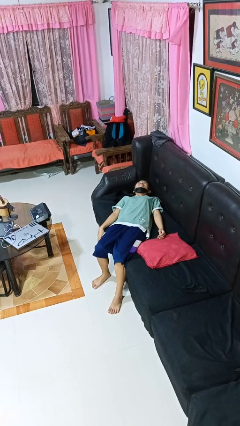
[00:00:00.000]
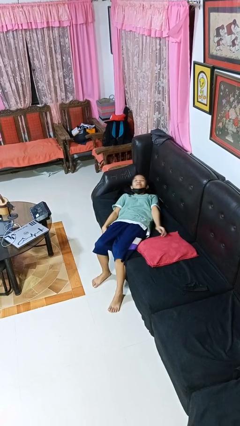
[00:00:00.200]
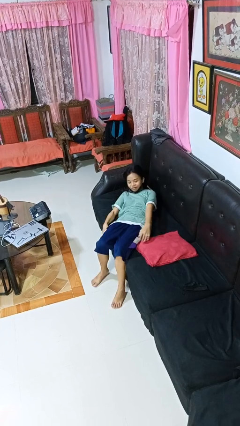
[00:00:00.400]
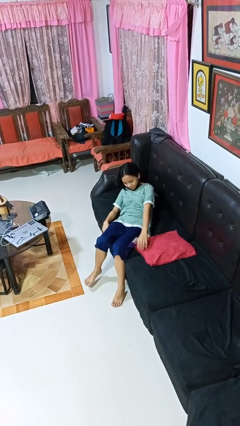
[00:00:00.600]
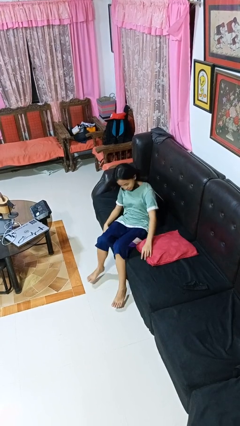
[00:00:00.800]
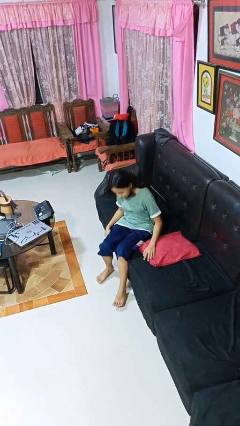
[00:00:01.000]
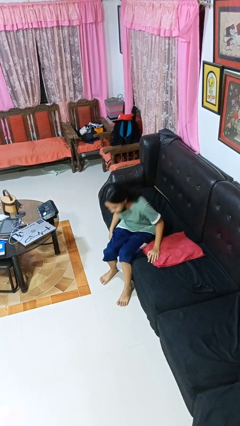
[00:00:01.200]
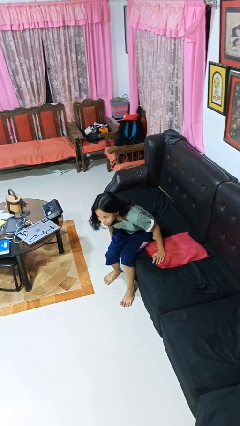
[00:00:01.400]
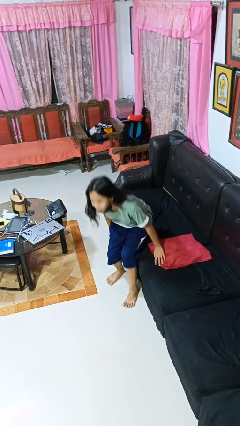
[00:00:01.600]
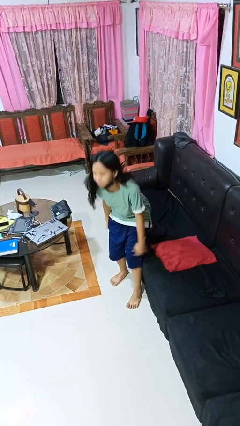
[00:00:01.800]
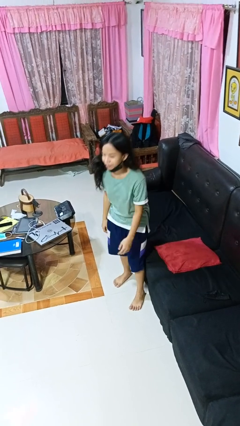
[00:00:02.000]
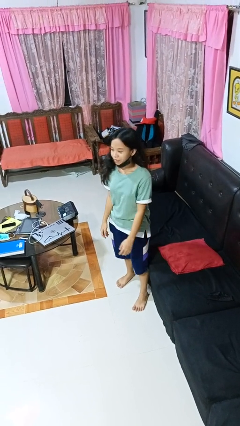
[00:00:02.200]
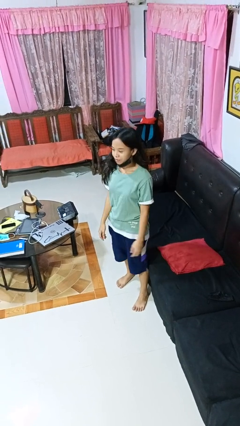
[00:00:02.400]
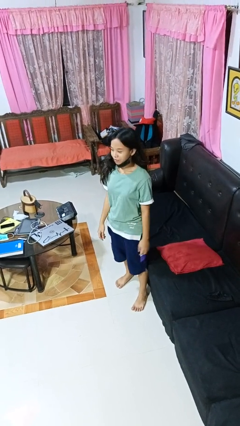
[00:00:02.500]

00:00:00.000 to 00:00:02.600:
person stands up

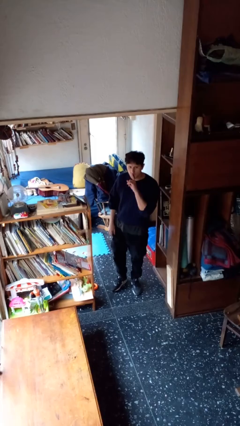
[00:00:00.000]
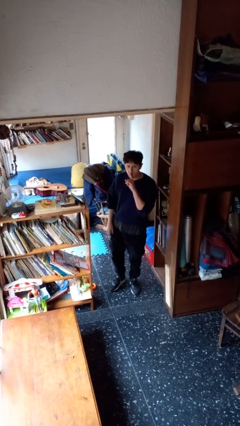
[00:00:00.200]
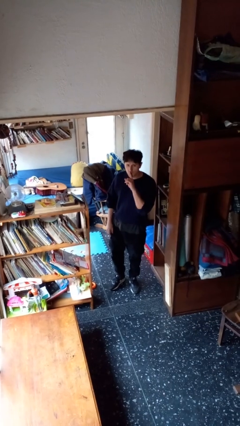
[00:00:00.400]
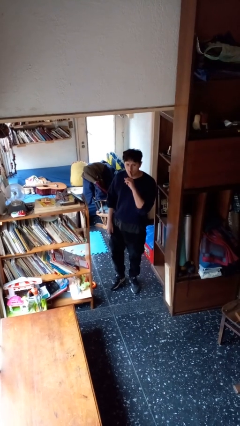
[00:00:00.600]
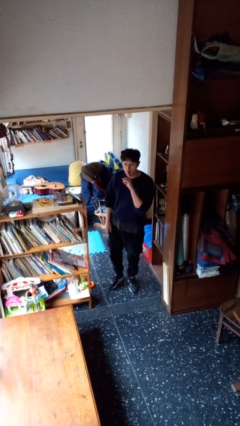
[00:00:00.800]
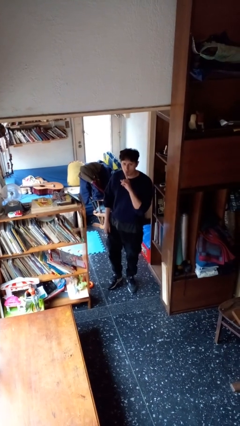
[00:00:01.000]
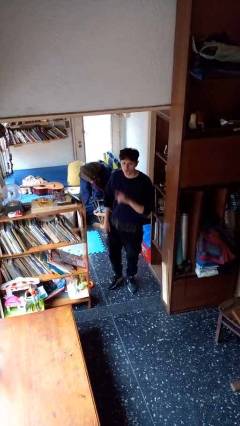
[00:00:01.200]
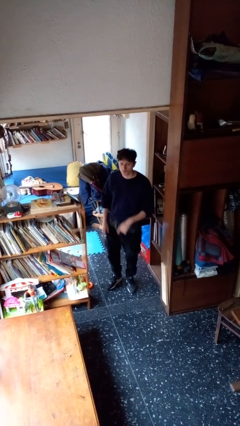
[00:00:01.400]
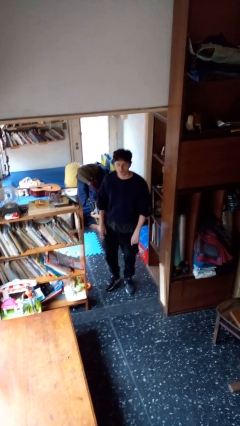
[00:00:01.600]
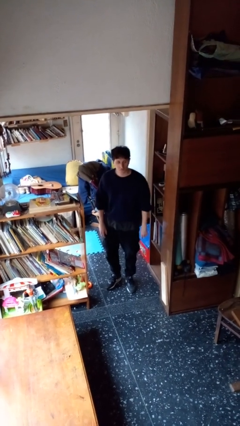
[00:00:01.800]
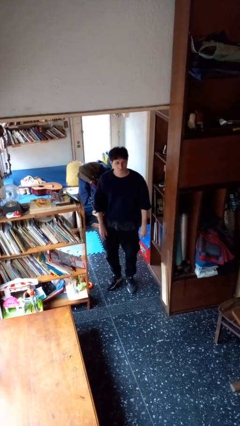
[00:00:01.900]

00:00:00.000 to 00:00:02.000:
person gestures be quiet

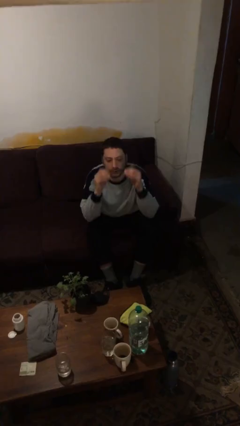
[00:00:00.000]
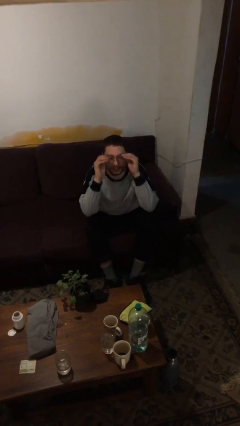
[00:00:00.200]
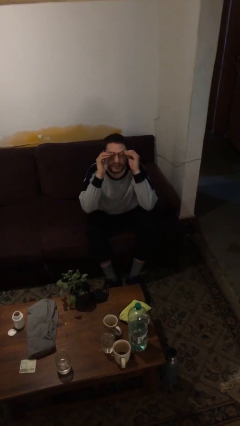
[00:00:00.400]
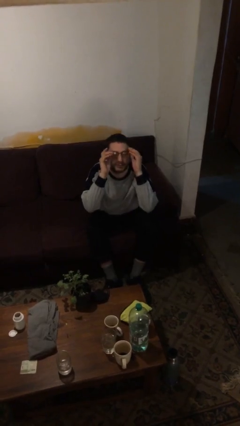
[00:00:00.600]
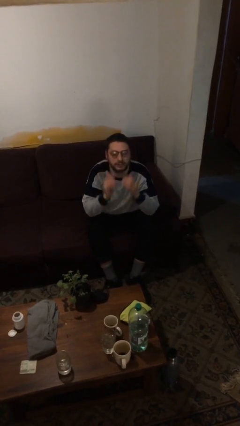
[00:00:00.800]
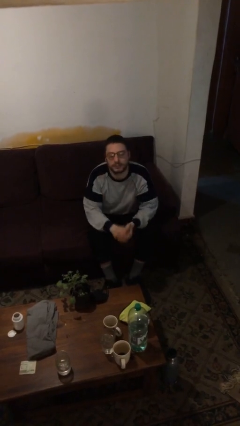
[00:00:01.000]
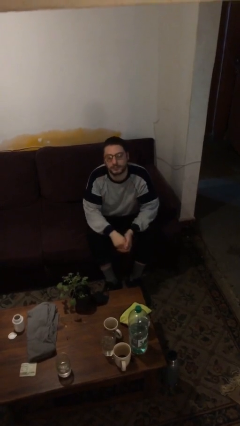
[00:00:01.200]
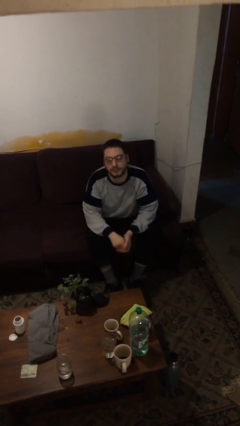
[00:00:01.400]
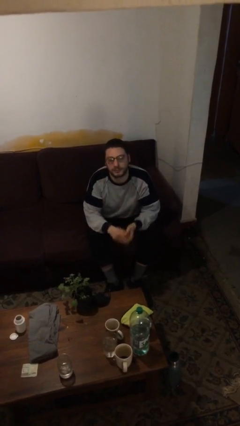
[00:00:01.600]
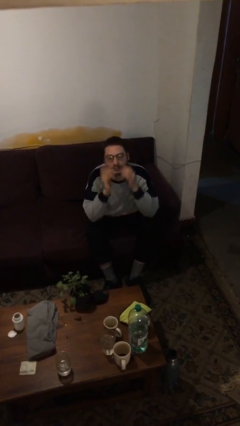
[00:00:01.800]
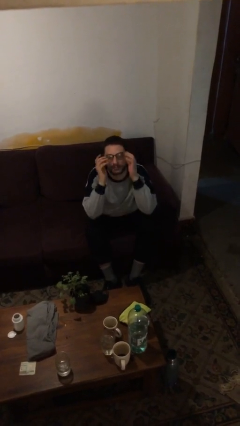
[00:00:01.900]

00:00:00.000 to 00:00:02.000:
person puts on glasses

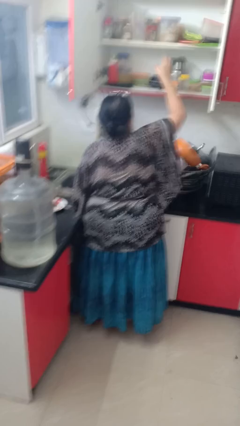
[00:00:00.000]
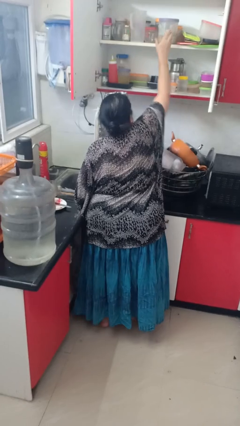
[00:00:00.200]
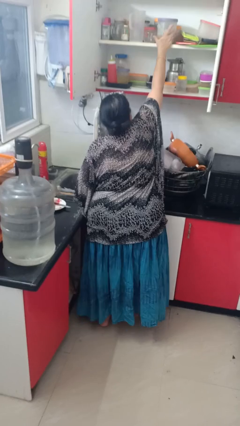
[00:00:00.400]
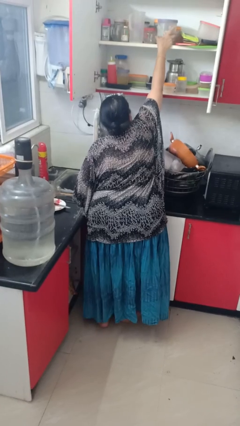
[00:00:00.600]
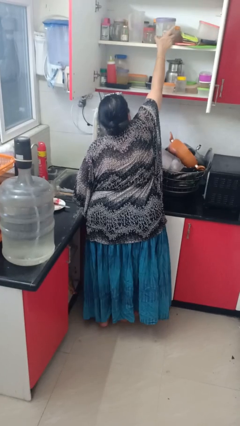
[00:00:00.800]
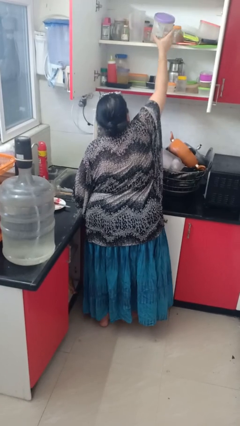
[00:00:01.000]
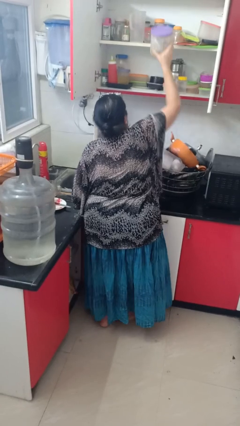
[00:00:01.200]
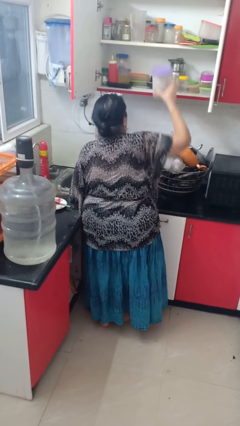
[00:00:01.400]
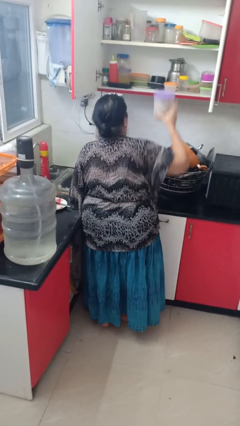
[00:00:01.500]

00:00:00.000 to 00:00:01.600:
person puts object in cabinet

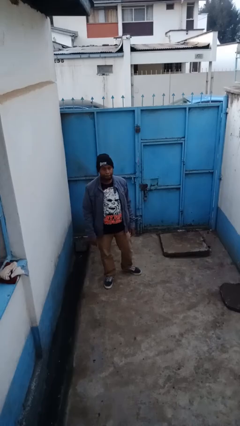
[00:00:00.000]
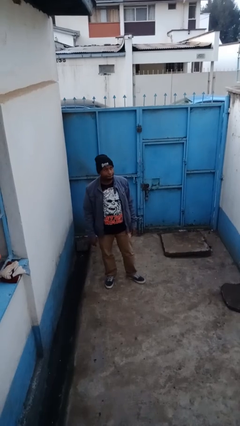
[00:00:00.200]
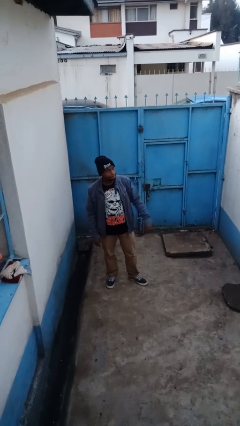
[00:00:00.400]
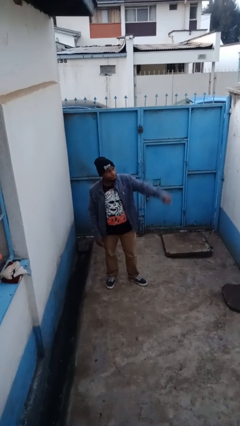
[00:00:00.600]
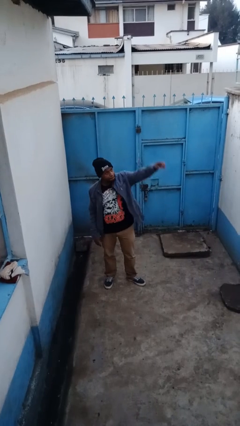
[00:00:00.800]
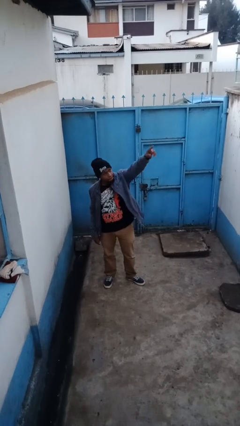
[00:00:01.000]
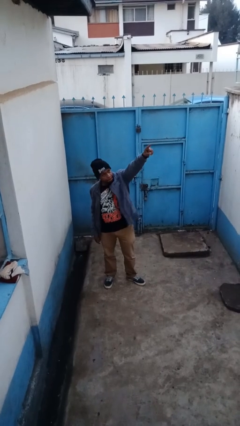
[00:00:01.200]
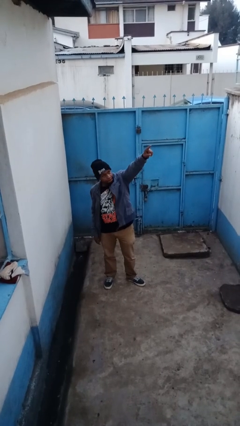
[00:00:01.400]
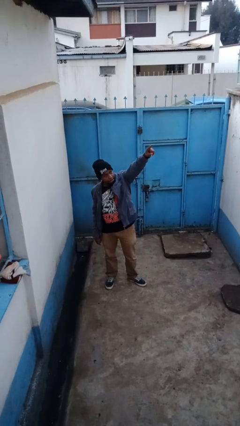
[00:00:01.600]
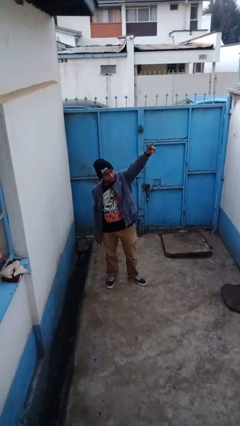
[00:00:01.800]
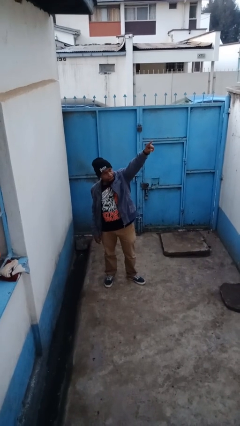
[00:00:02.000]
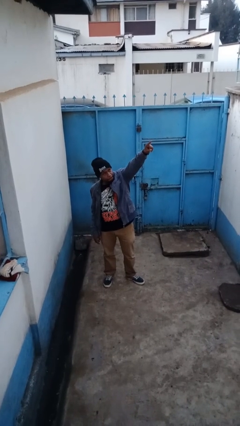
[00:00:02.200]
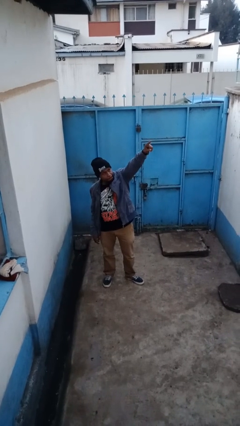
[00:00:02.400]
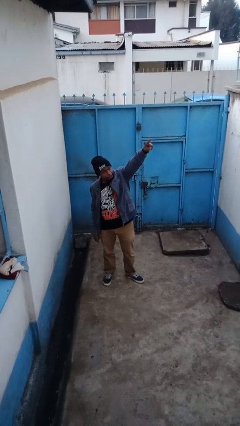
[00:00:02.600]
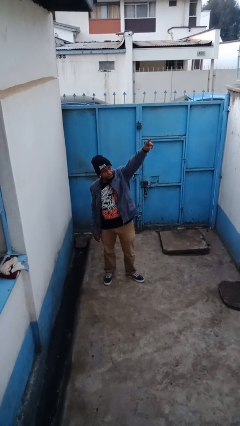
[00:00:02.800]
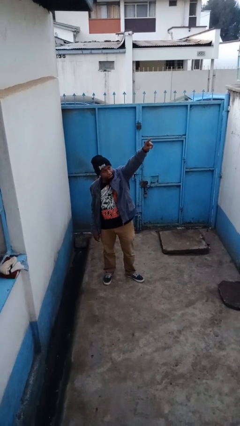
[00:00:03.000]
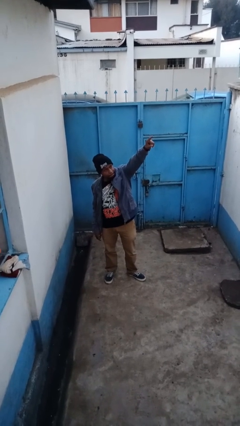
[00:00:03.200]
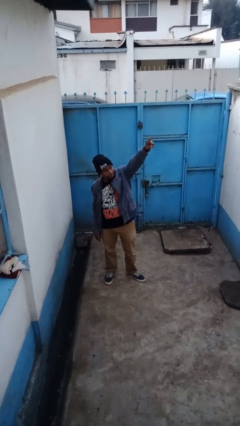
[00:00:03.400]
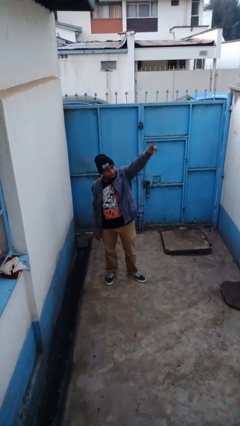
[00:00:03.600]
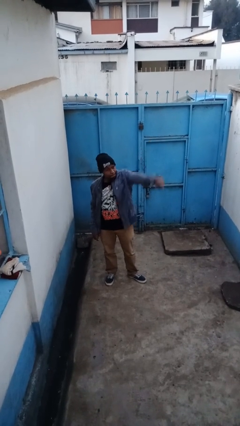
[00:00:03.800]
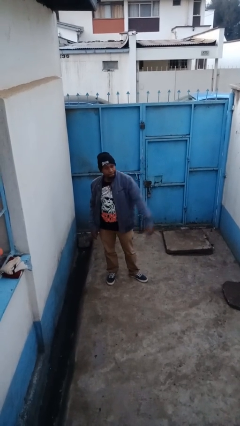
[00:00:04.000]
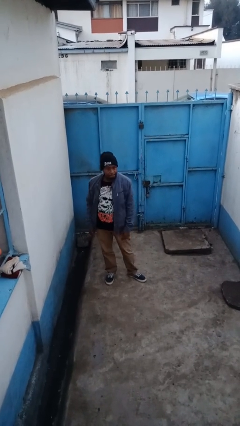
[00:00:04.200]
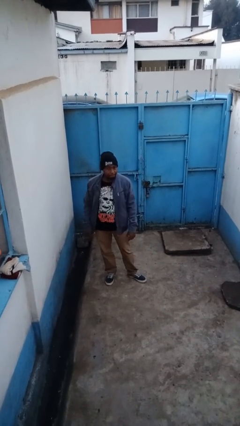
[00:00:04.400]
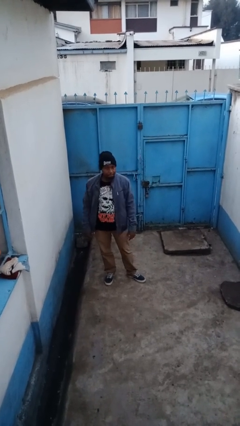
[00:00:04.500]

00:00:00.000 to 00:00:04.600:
person points at person

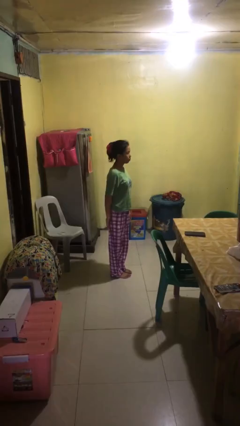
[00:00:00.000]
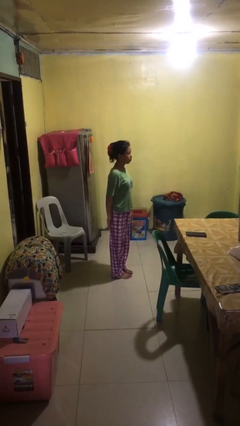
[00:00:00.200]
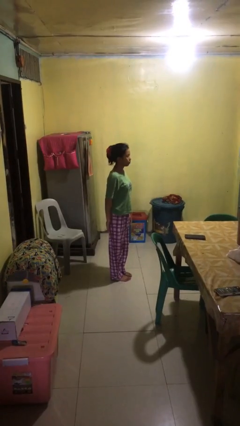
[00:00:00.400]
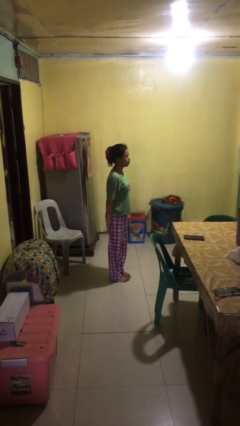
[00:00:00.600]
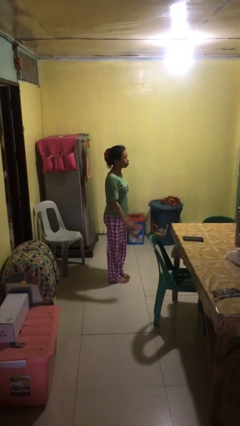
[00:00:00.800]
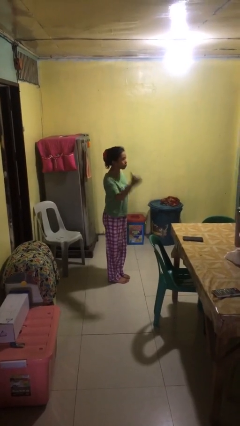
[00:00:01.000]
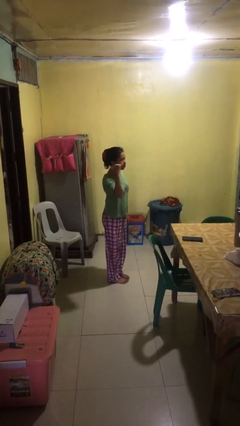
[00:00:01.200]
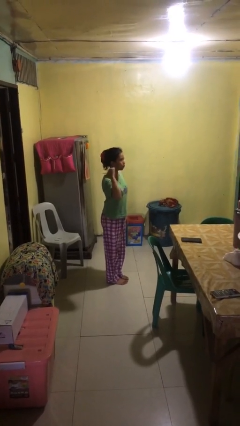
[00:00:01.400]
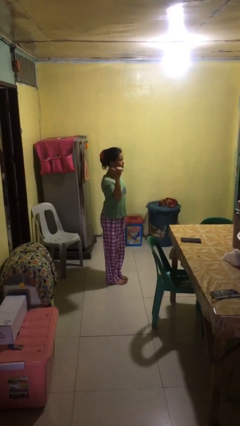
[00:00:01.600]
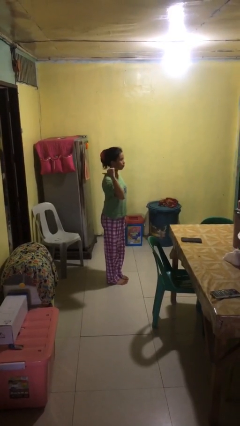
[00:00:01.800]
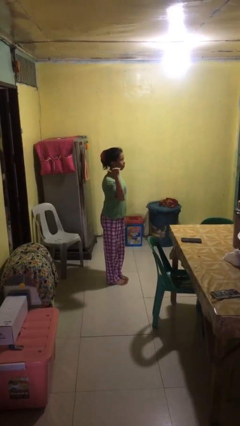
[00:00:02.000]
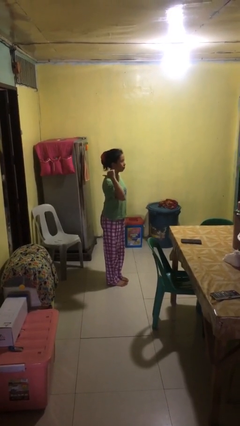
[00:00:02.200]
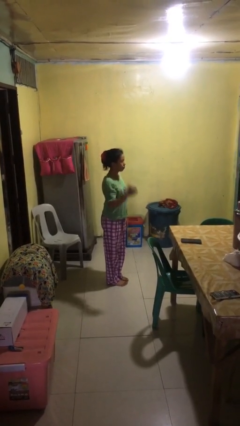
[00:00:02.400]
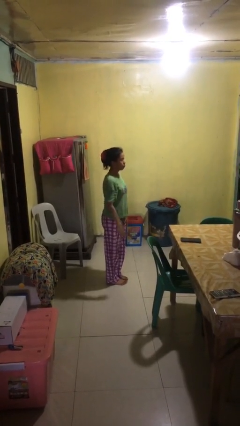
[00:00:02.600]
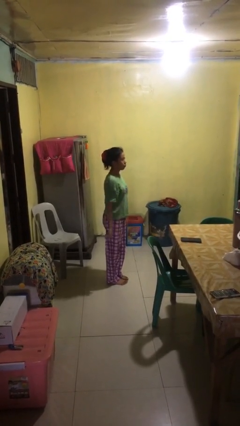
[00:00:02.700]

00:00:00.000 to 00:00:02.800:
person gestures behind me

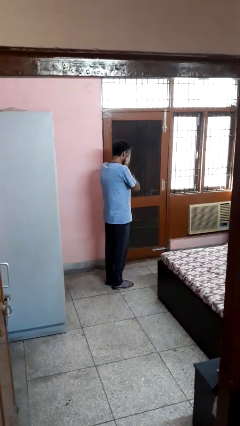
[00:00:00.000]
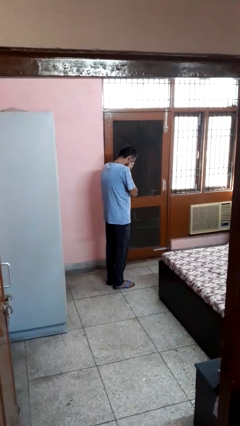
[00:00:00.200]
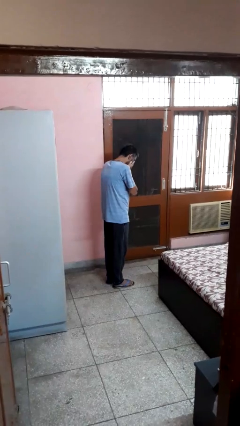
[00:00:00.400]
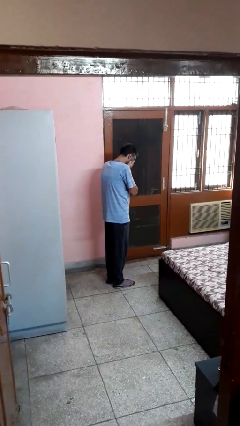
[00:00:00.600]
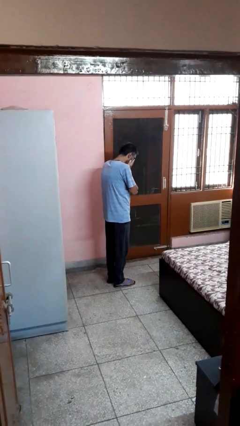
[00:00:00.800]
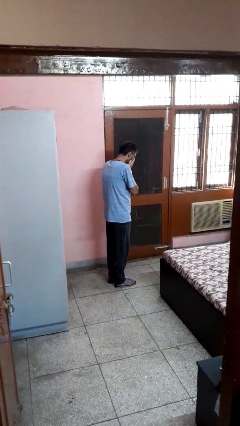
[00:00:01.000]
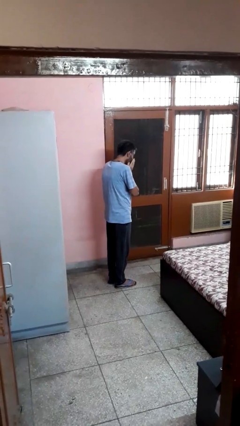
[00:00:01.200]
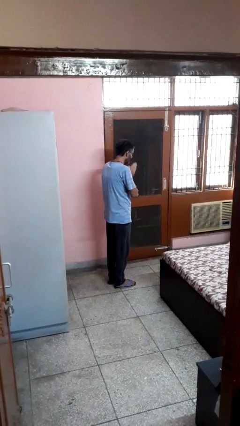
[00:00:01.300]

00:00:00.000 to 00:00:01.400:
person sneezes into hand
